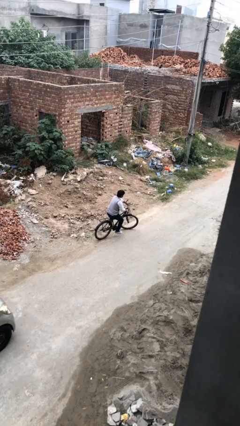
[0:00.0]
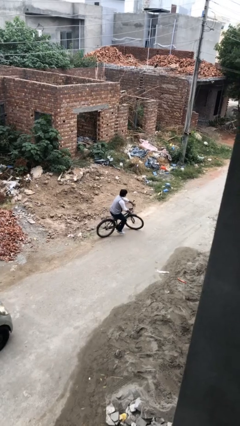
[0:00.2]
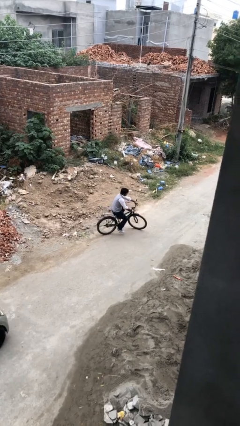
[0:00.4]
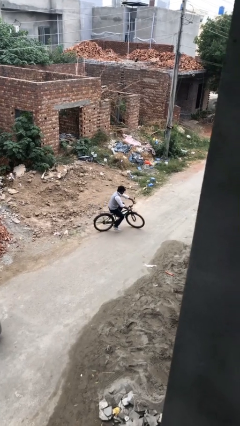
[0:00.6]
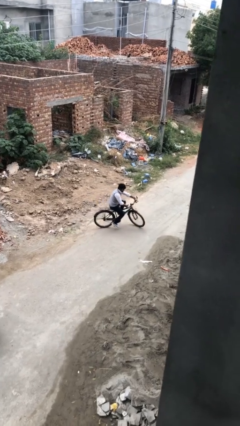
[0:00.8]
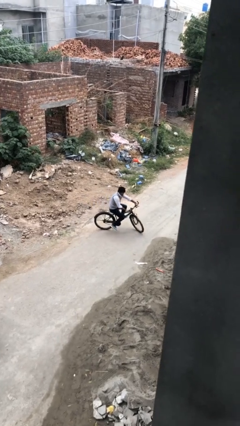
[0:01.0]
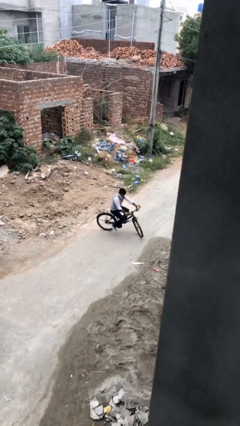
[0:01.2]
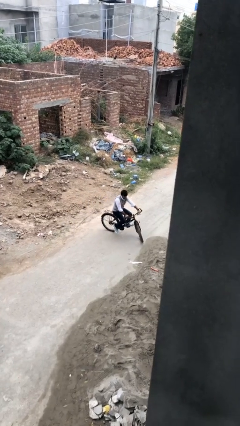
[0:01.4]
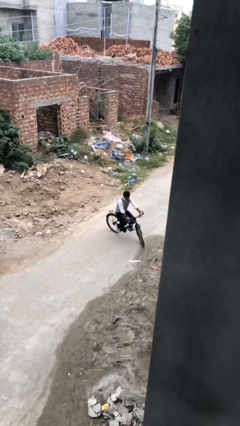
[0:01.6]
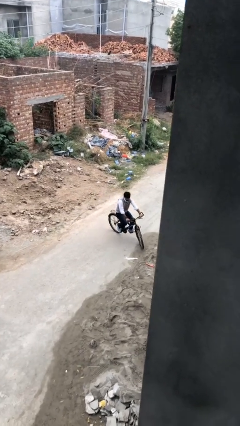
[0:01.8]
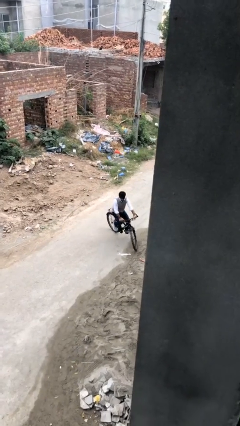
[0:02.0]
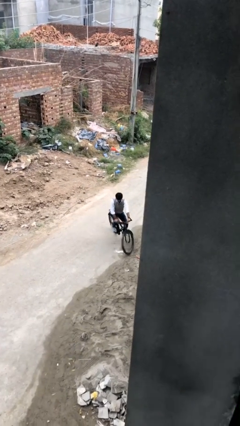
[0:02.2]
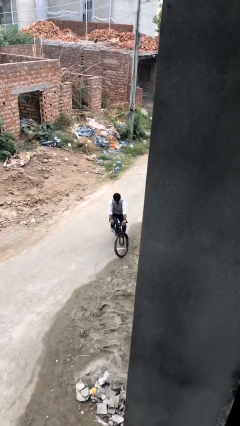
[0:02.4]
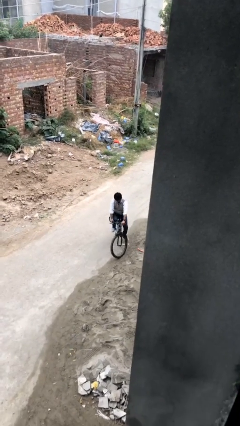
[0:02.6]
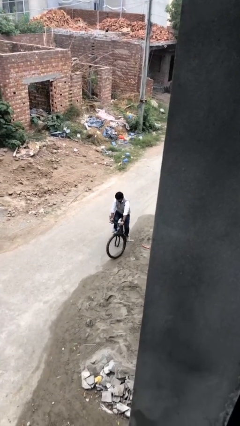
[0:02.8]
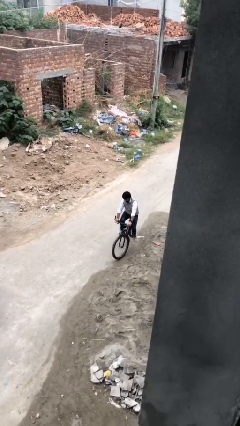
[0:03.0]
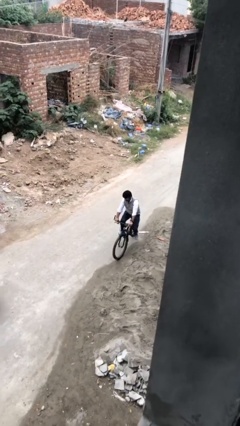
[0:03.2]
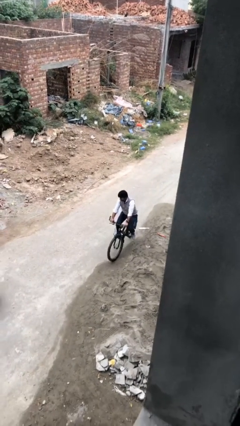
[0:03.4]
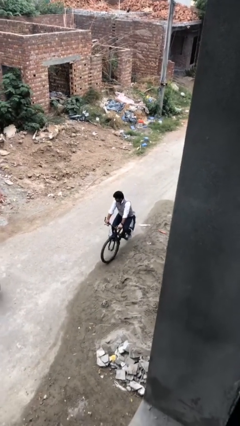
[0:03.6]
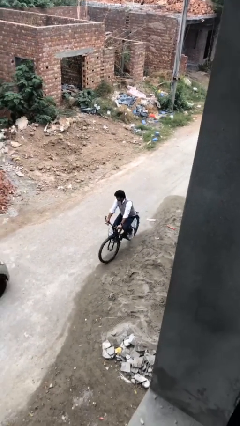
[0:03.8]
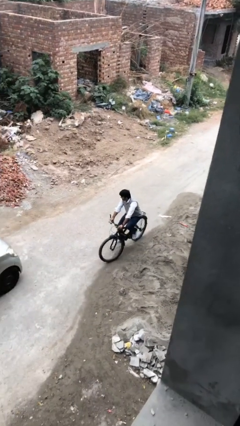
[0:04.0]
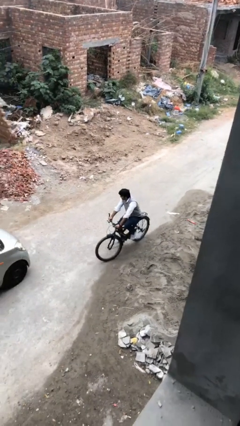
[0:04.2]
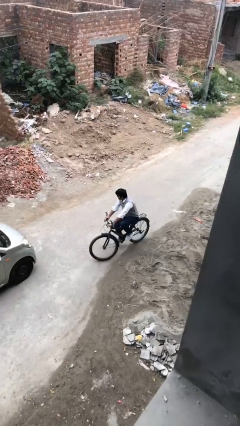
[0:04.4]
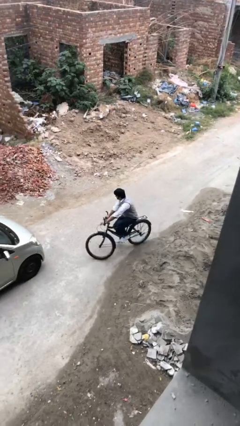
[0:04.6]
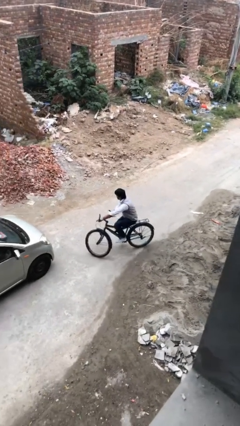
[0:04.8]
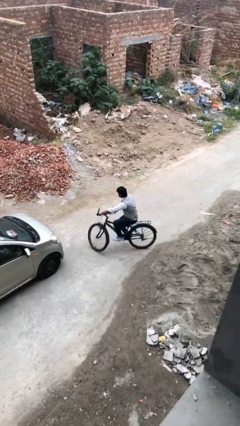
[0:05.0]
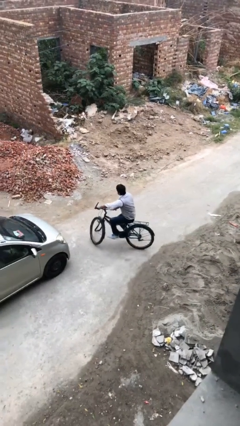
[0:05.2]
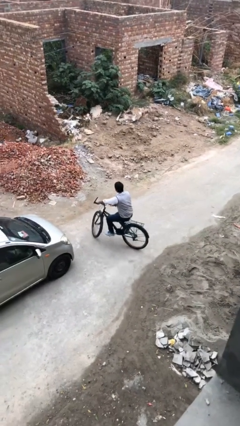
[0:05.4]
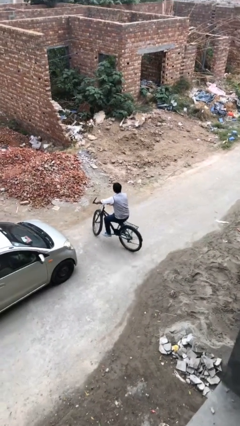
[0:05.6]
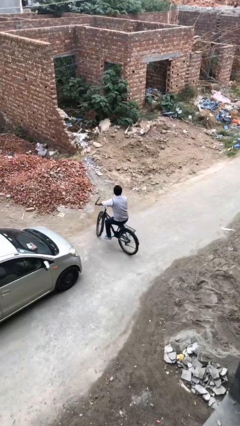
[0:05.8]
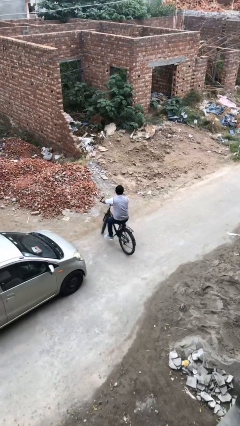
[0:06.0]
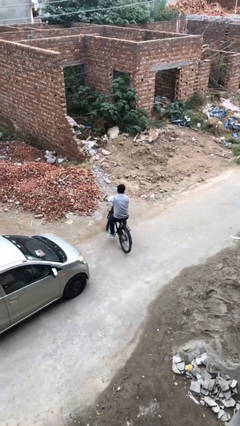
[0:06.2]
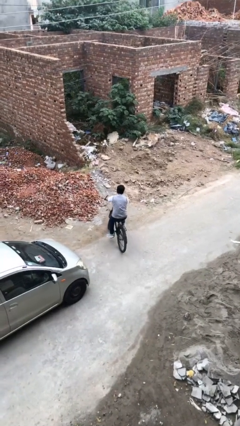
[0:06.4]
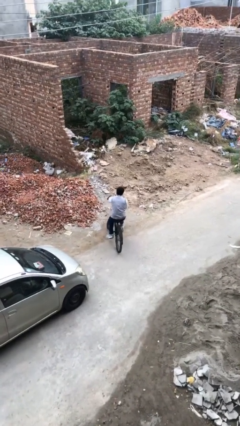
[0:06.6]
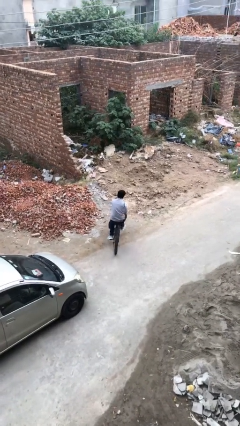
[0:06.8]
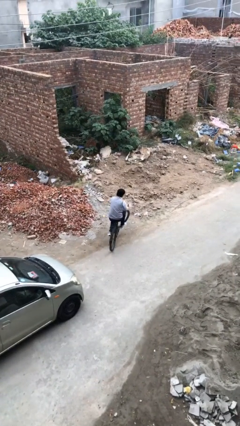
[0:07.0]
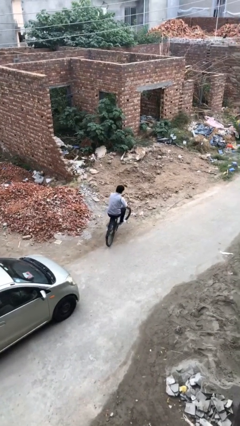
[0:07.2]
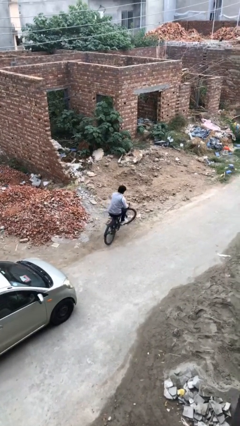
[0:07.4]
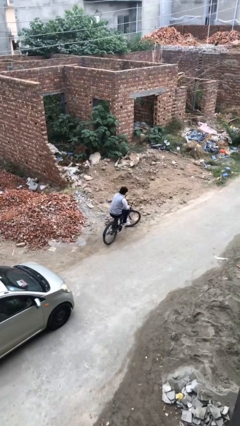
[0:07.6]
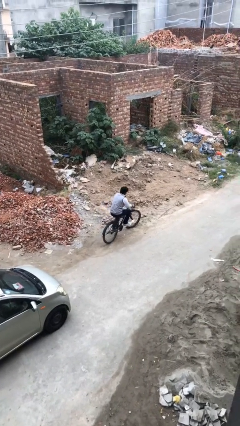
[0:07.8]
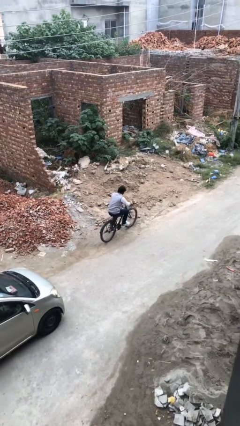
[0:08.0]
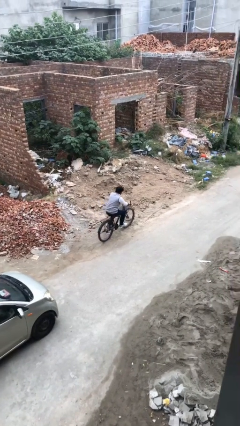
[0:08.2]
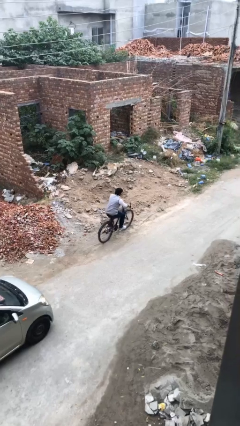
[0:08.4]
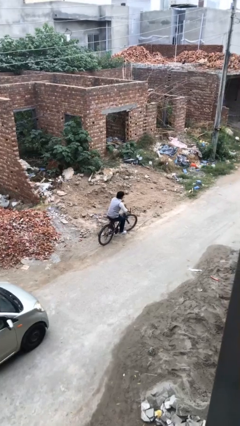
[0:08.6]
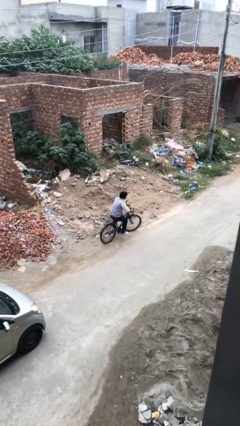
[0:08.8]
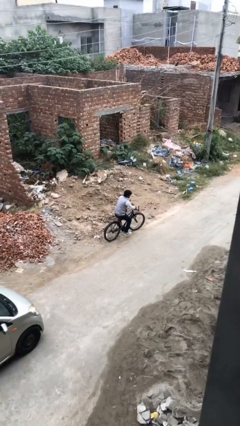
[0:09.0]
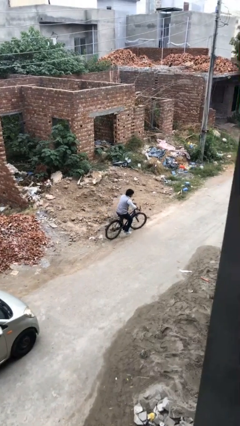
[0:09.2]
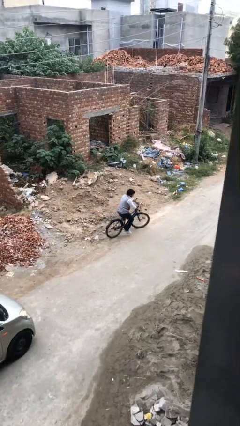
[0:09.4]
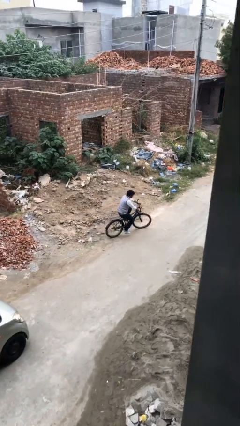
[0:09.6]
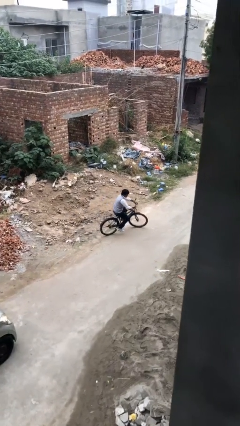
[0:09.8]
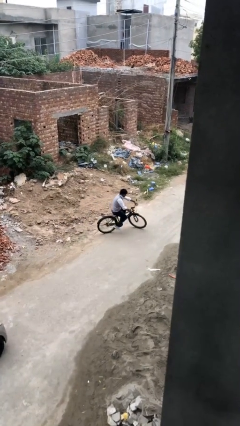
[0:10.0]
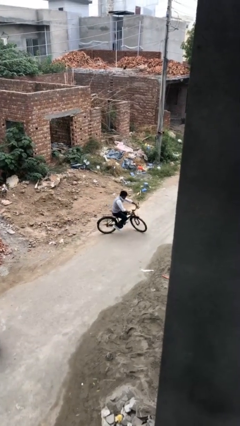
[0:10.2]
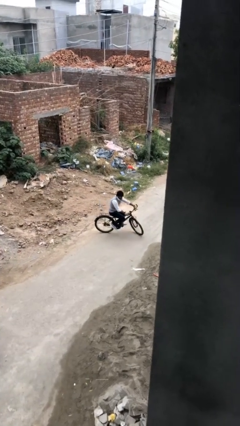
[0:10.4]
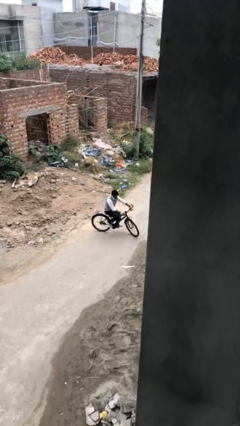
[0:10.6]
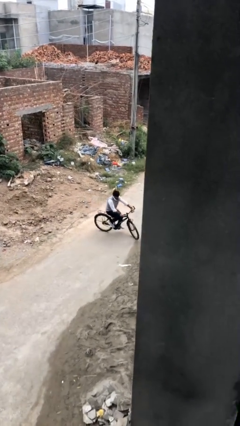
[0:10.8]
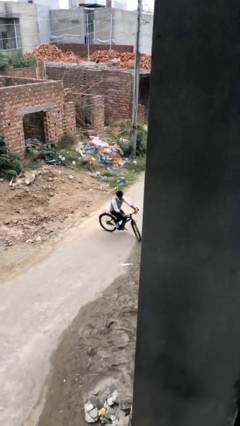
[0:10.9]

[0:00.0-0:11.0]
person rides bicycle

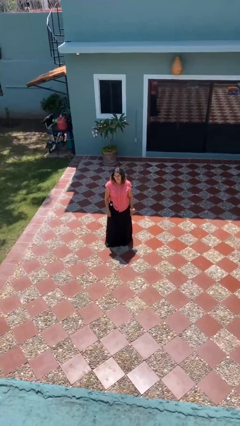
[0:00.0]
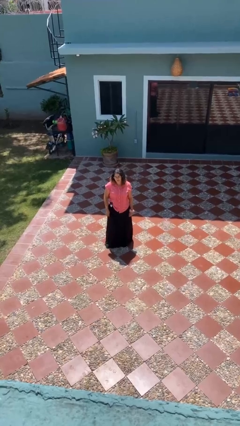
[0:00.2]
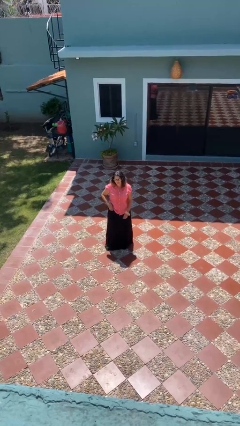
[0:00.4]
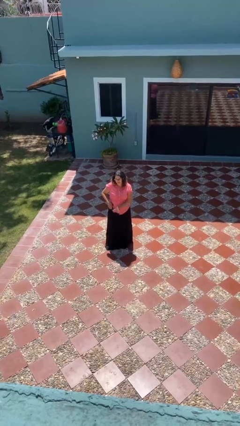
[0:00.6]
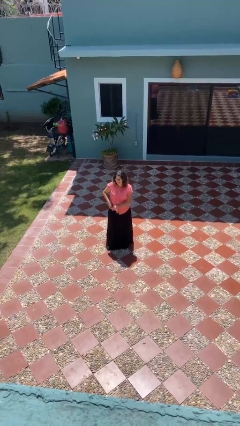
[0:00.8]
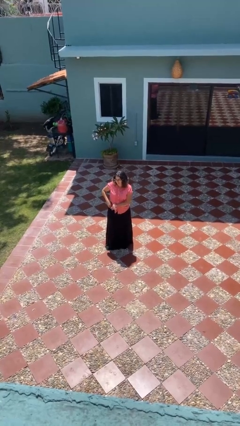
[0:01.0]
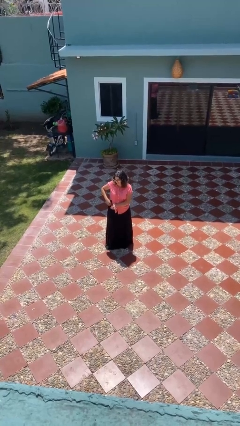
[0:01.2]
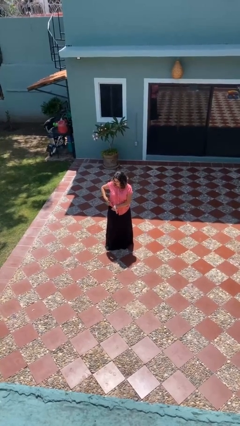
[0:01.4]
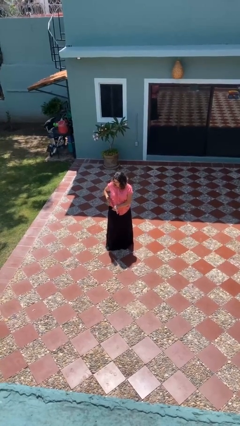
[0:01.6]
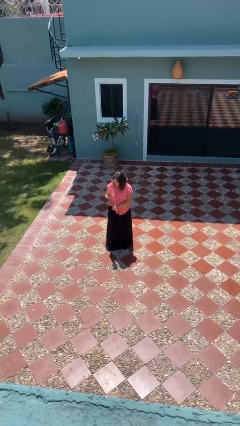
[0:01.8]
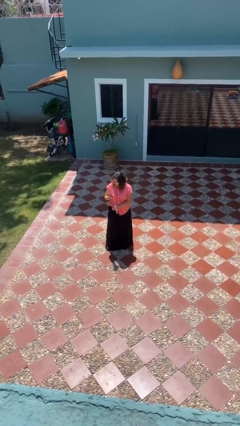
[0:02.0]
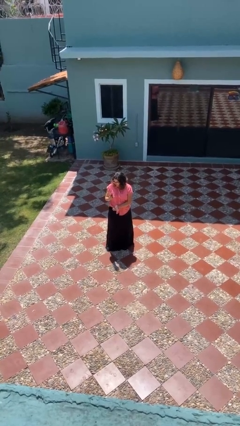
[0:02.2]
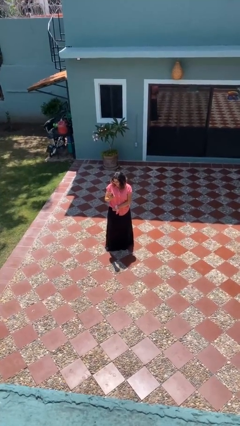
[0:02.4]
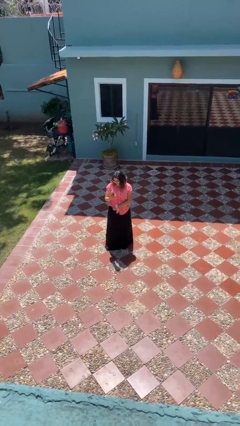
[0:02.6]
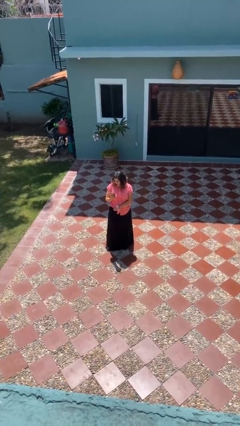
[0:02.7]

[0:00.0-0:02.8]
person takes phone from pocket

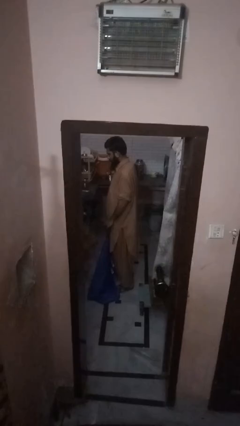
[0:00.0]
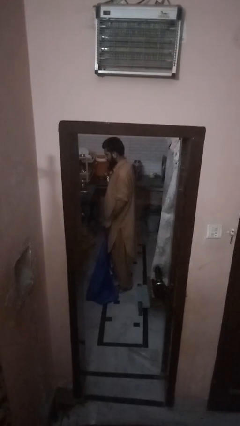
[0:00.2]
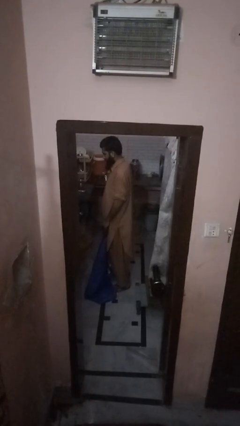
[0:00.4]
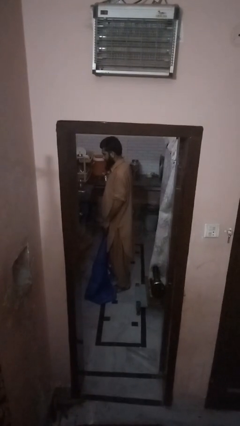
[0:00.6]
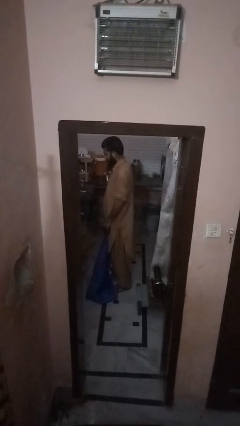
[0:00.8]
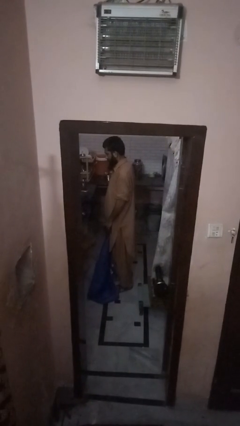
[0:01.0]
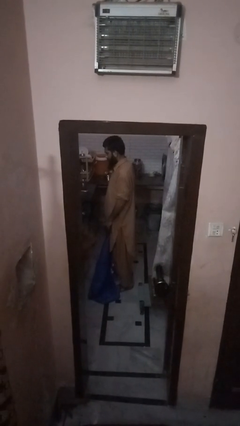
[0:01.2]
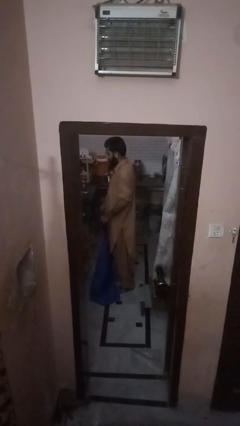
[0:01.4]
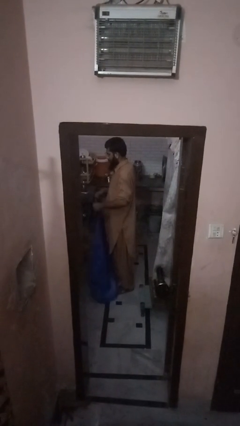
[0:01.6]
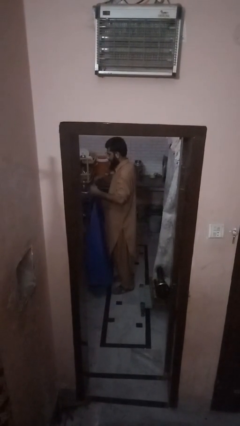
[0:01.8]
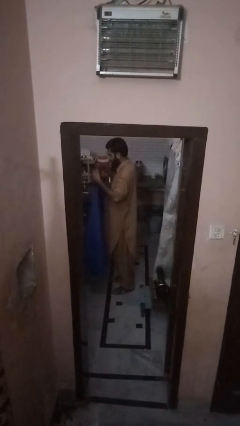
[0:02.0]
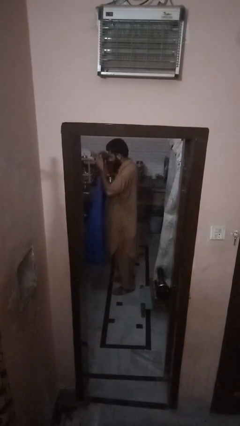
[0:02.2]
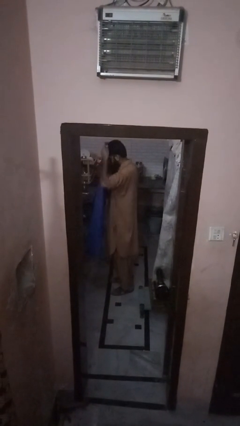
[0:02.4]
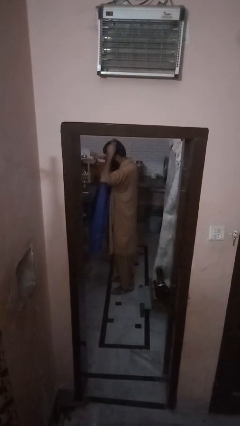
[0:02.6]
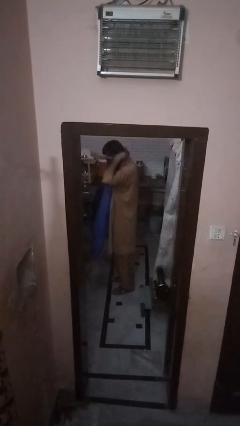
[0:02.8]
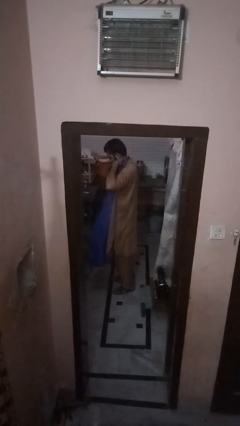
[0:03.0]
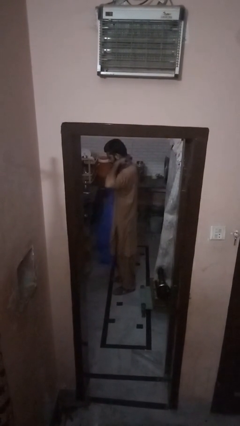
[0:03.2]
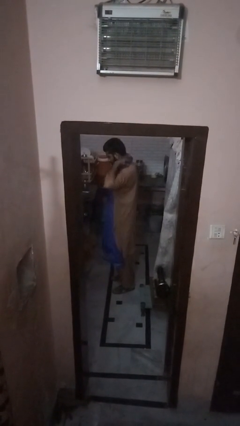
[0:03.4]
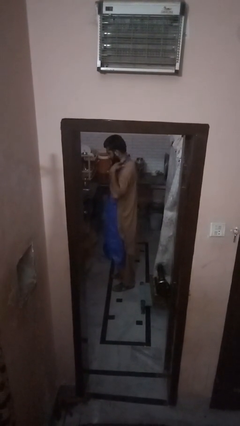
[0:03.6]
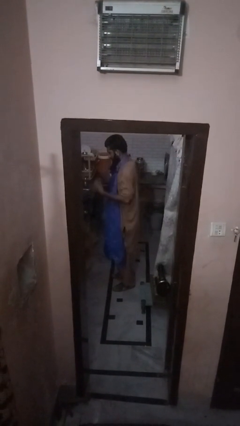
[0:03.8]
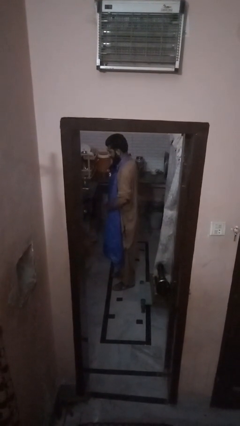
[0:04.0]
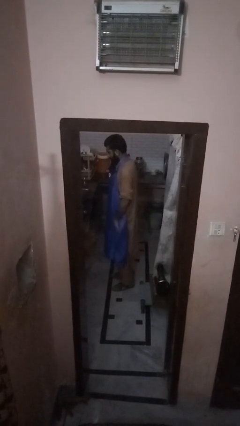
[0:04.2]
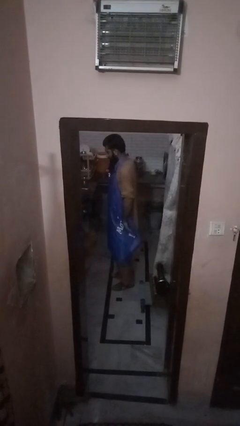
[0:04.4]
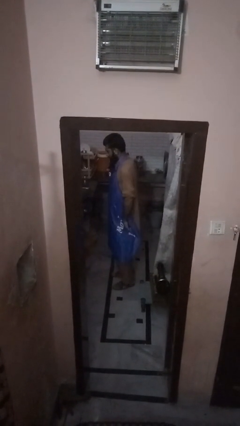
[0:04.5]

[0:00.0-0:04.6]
person puts on apron
